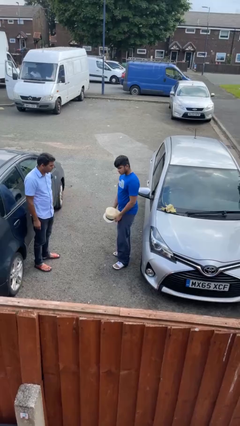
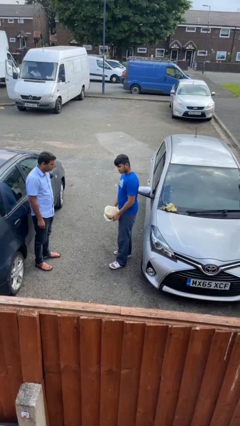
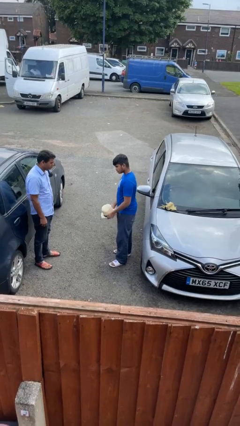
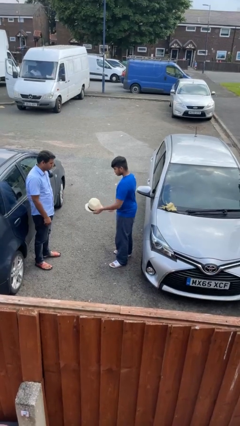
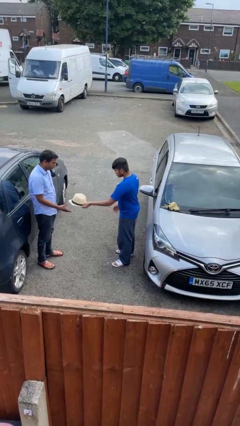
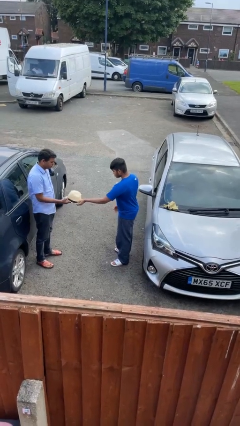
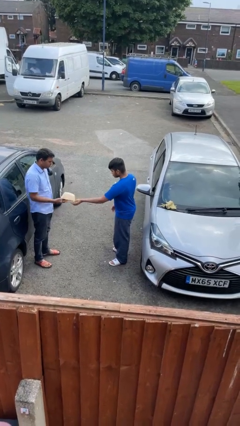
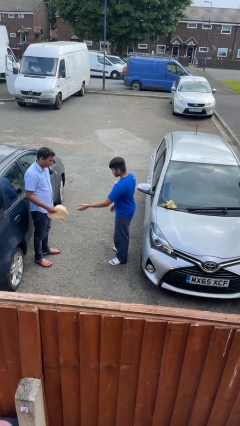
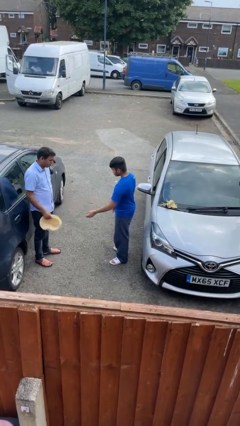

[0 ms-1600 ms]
person transfers object to person

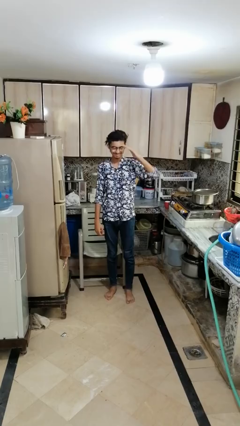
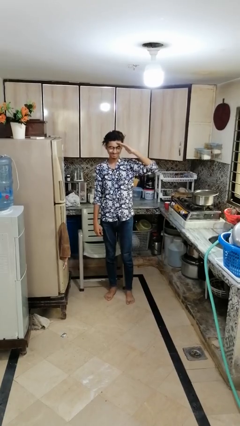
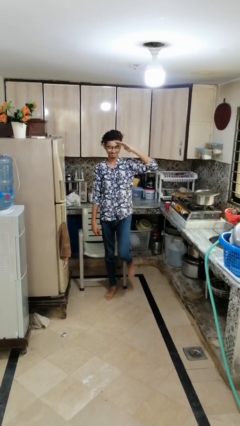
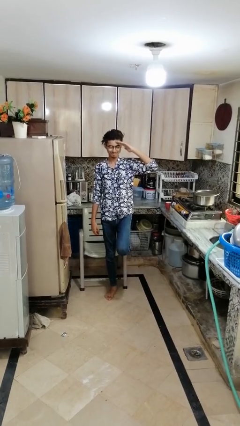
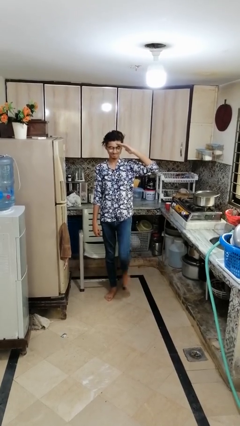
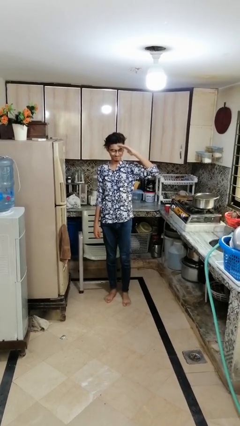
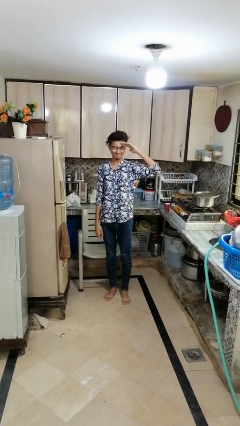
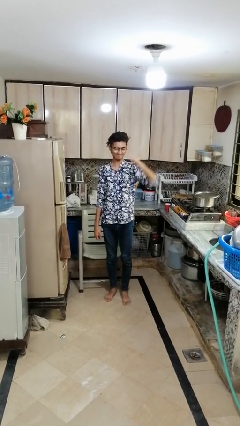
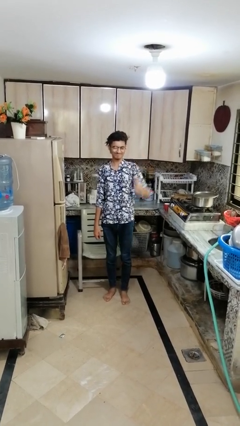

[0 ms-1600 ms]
person salutes

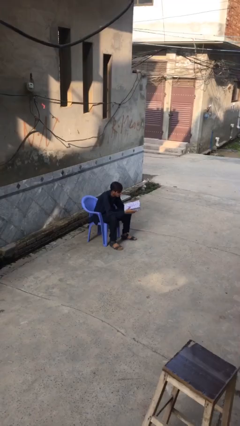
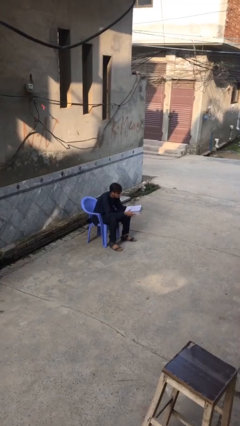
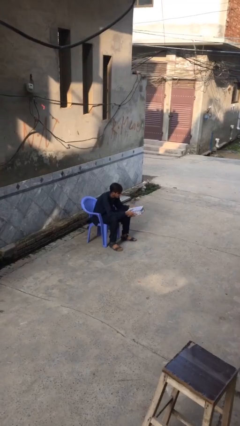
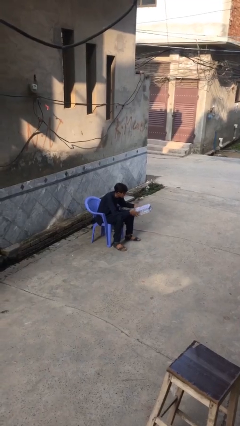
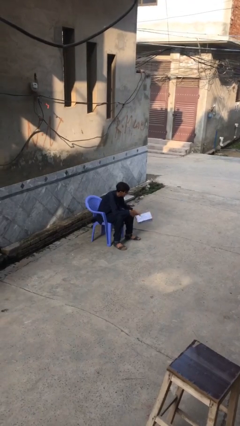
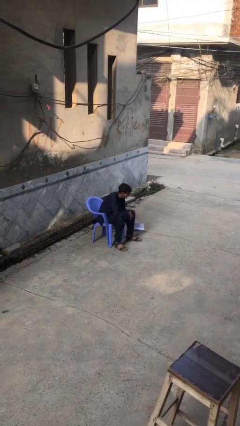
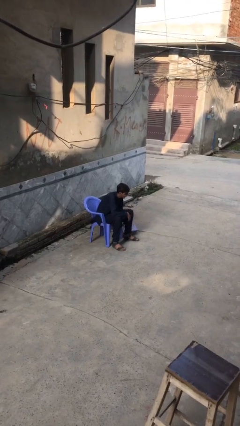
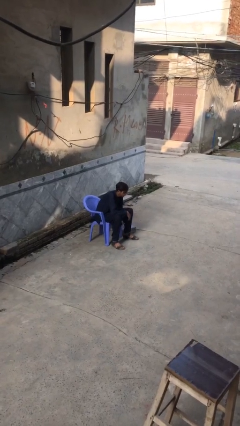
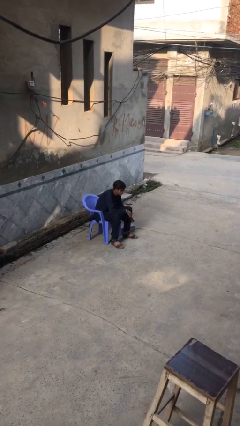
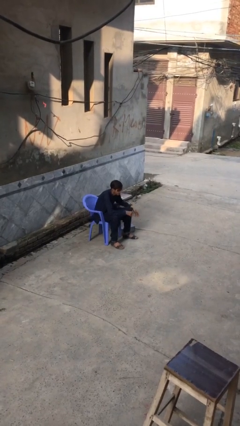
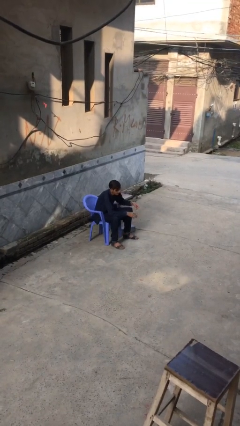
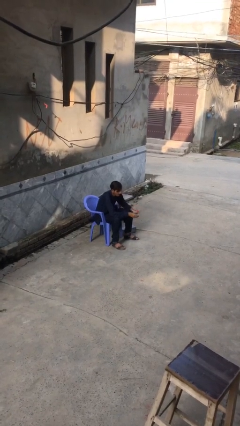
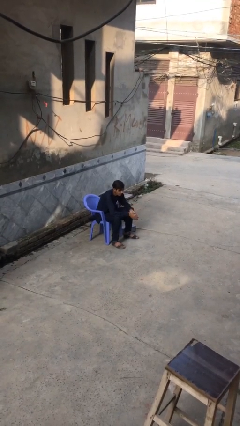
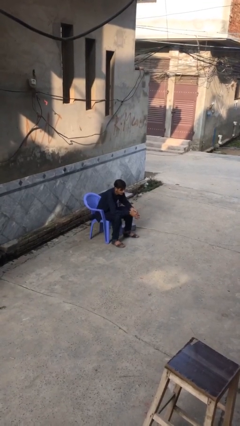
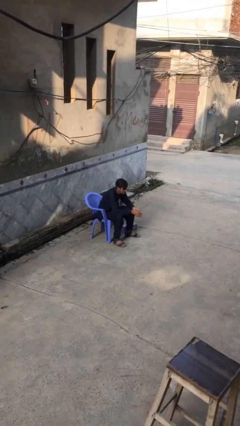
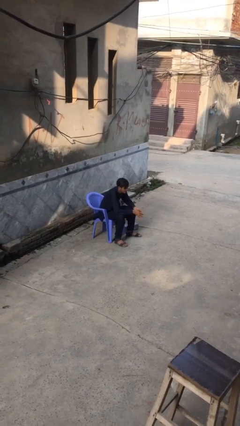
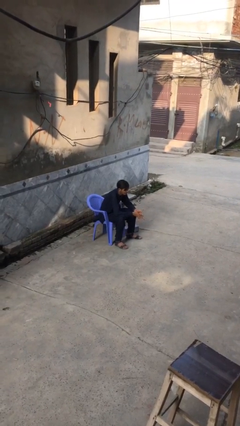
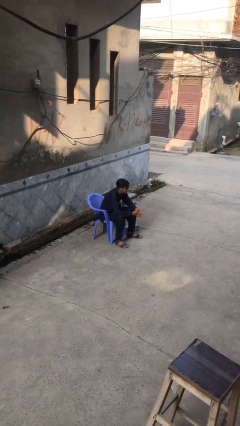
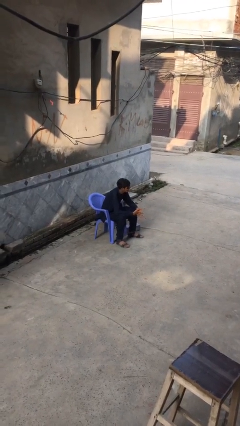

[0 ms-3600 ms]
person puts down object on floor

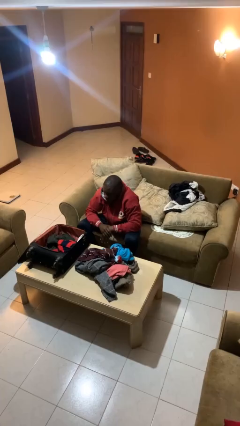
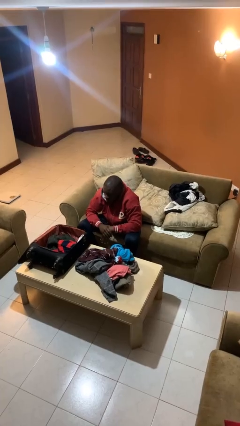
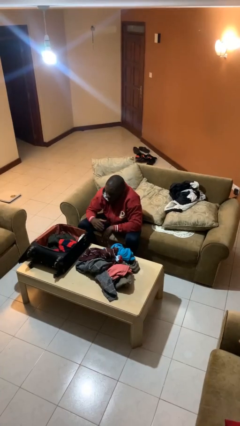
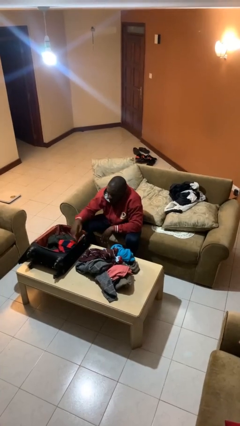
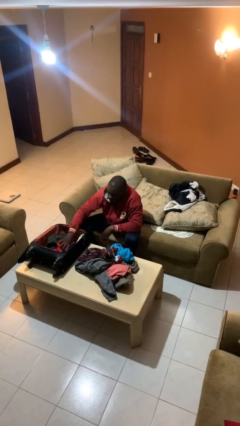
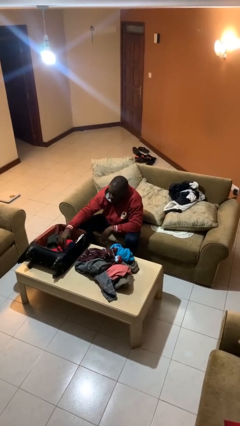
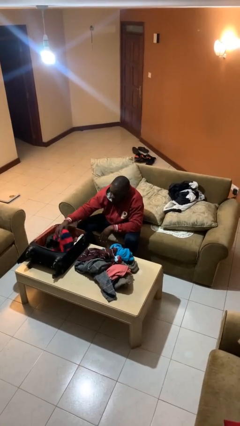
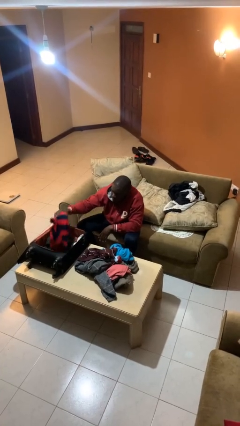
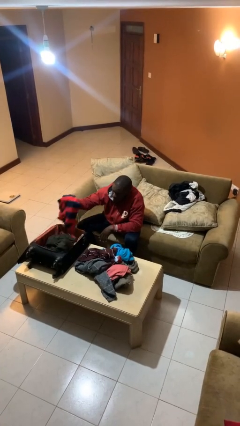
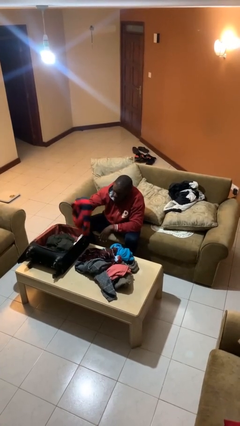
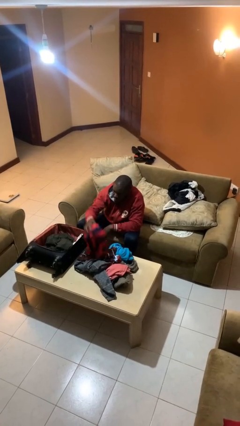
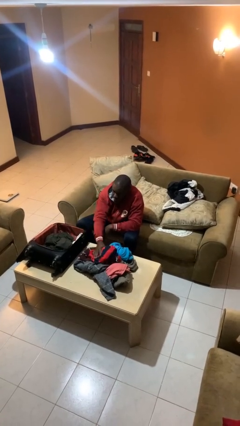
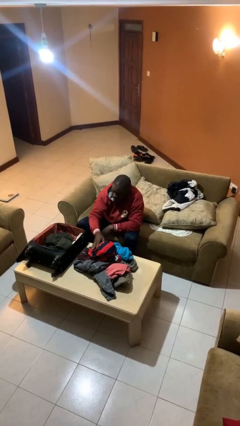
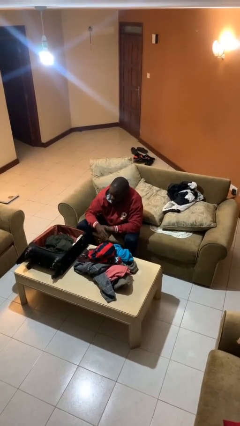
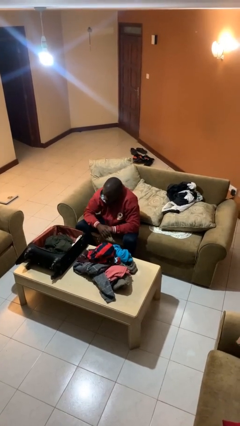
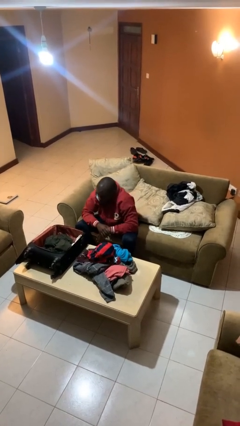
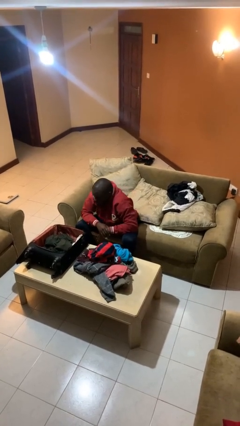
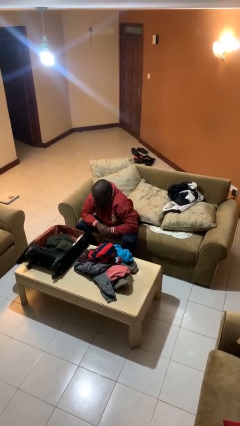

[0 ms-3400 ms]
person unloads clothes from suitcase

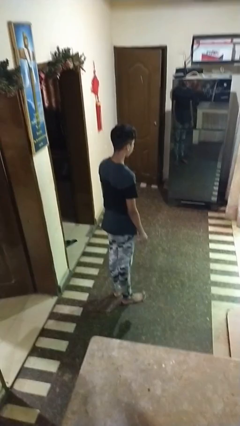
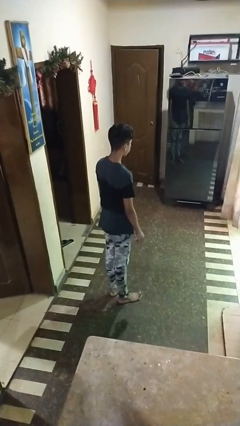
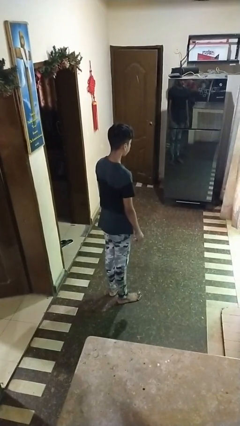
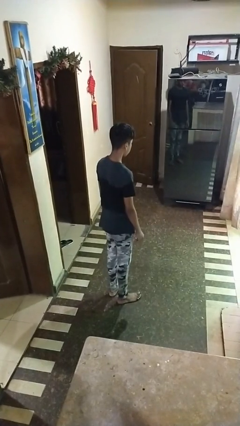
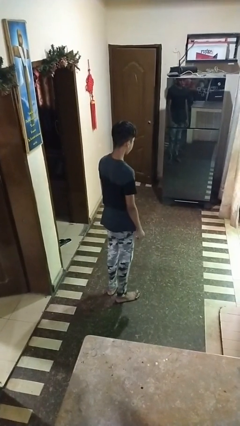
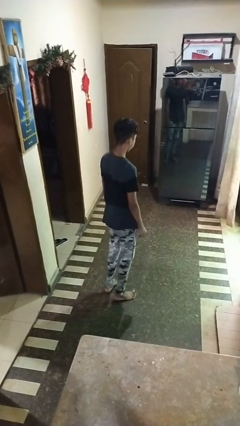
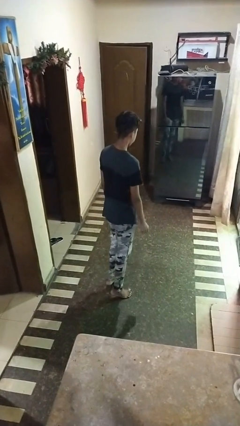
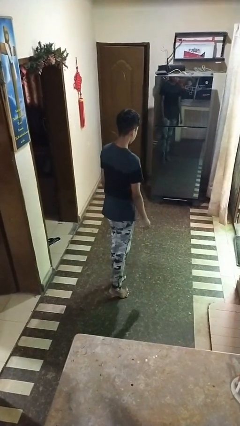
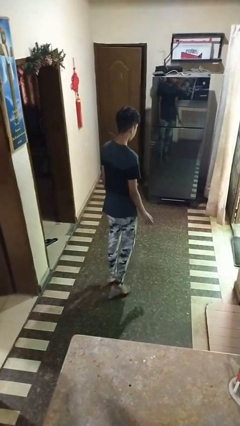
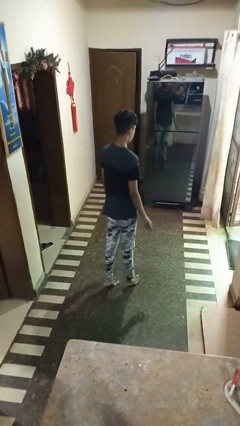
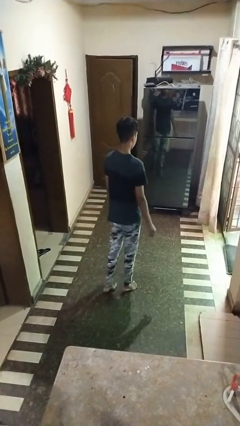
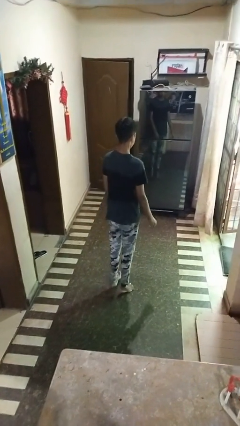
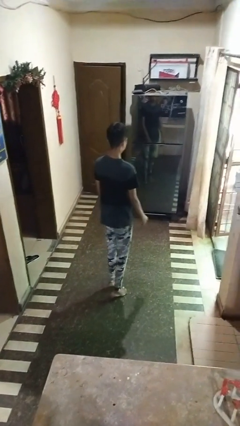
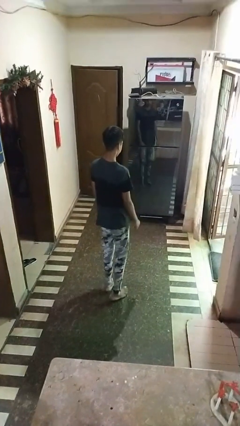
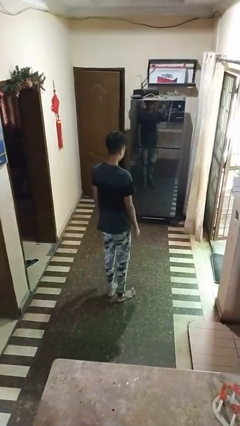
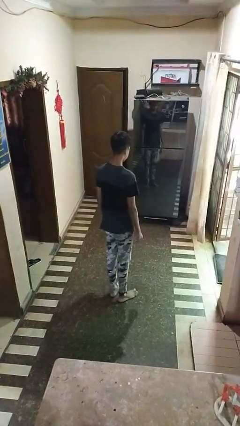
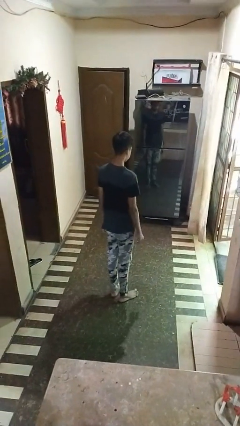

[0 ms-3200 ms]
person walks tiptoe

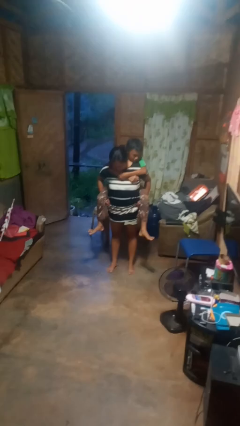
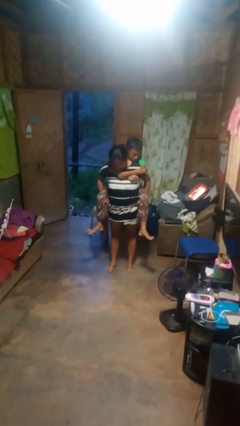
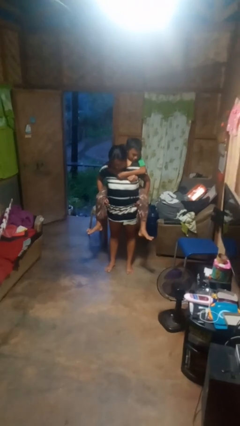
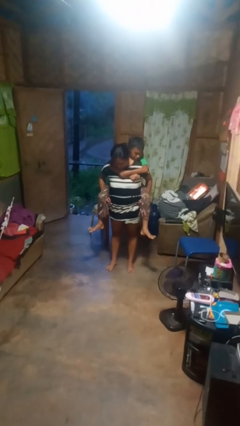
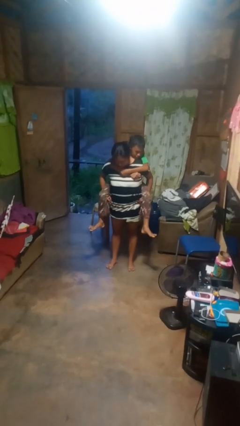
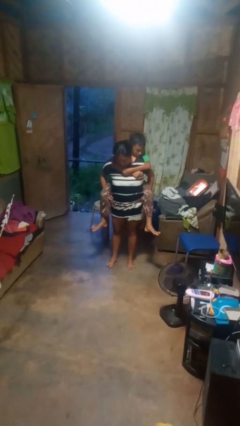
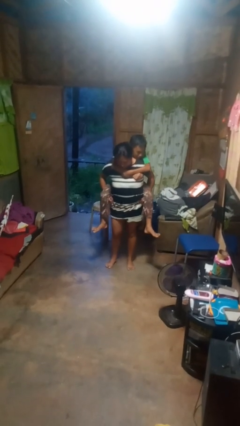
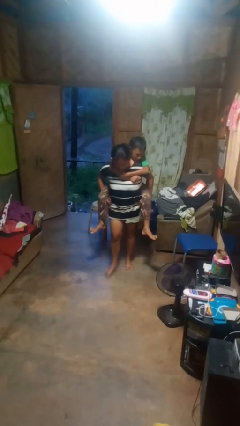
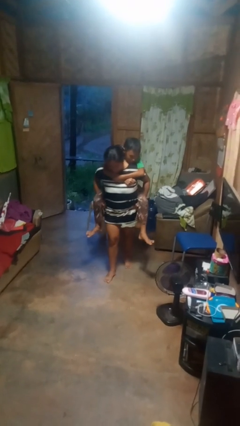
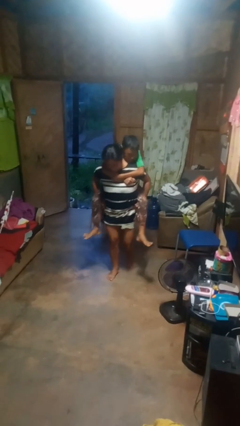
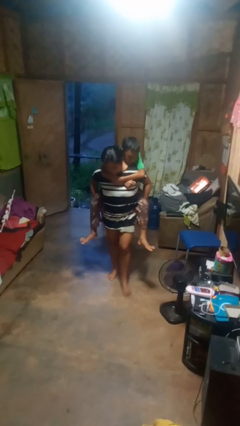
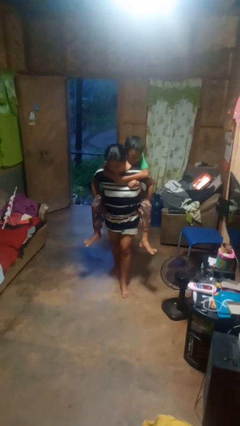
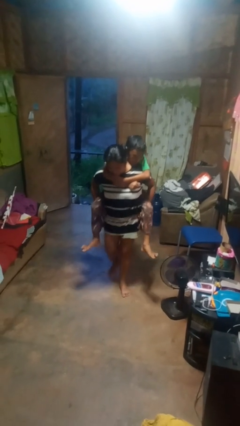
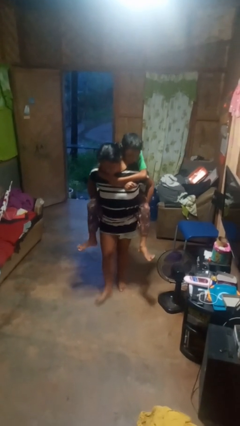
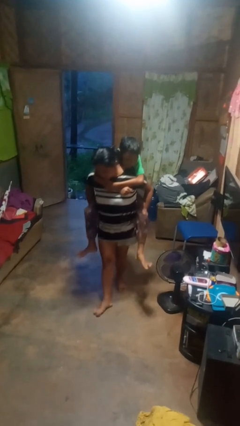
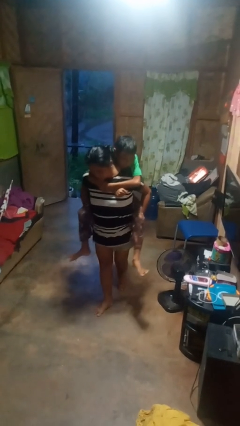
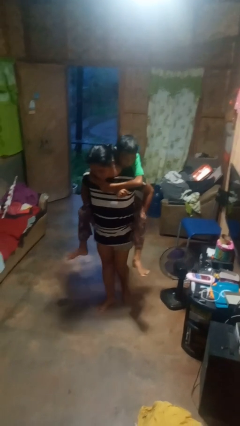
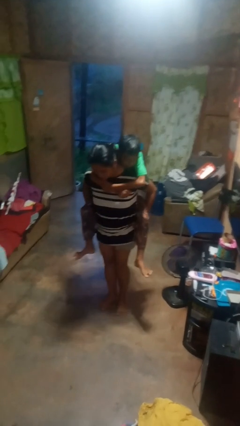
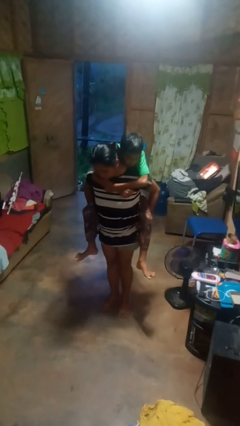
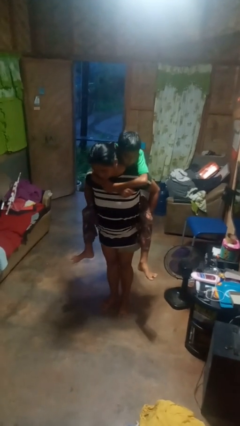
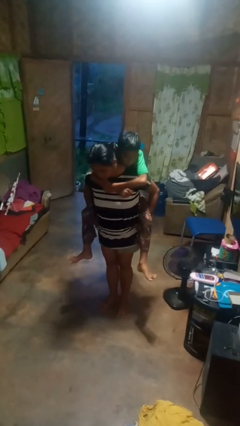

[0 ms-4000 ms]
person carries person on back

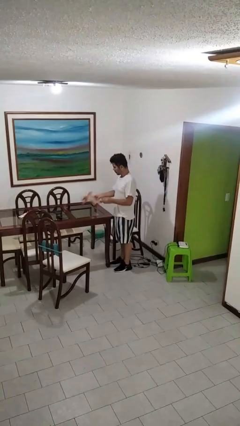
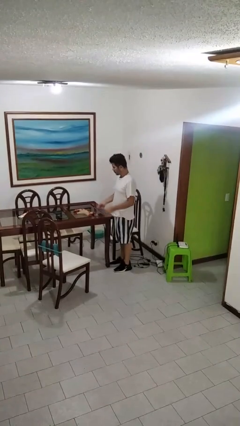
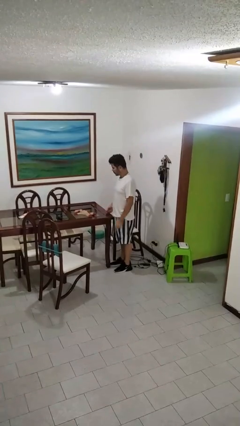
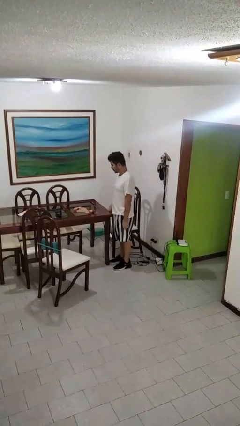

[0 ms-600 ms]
person throws object on table
